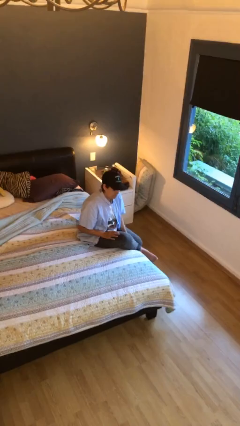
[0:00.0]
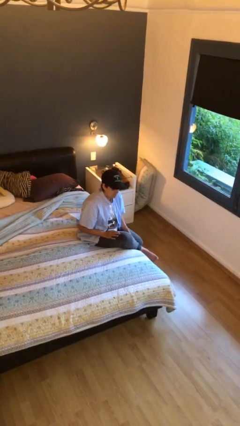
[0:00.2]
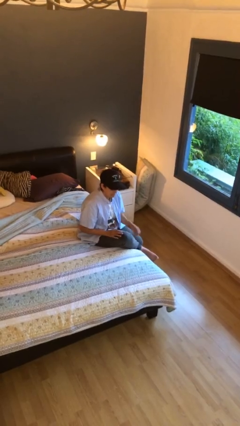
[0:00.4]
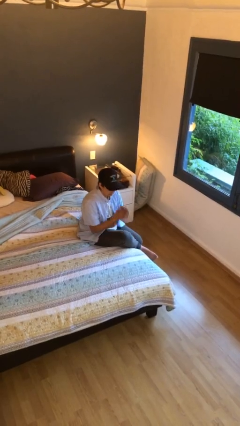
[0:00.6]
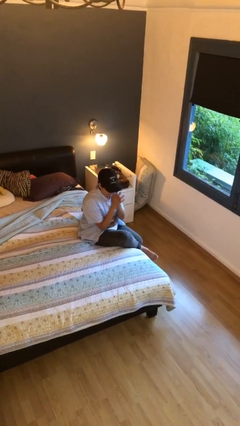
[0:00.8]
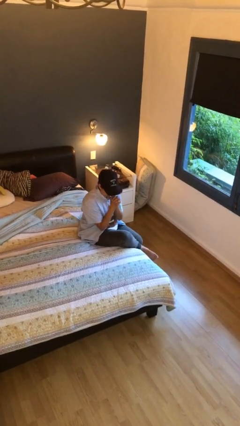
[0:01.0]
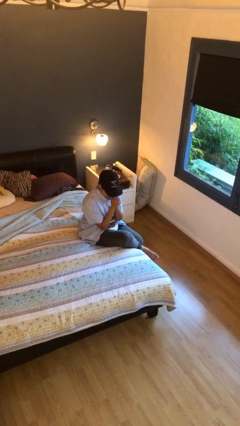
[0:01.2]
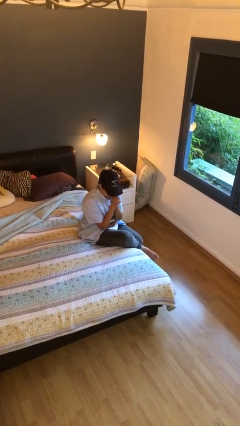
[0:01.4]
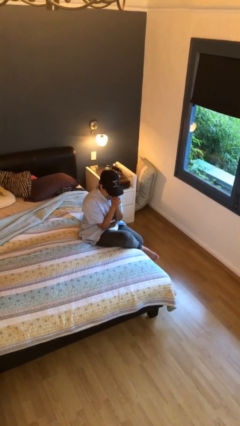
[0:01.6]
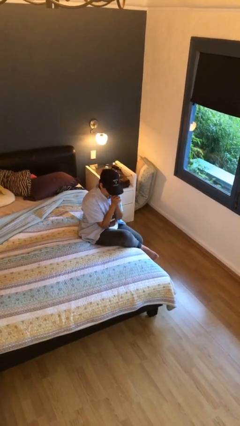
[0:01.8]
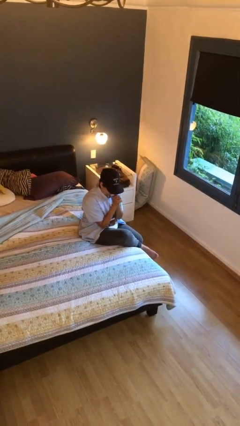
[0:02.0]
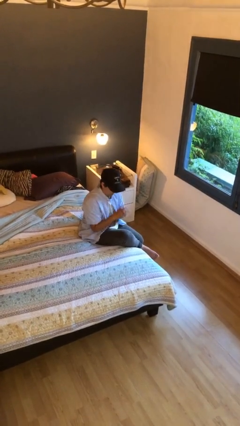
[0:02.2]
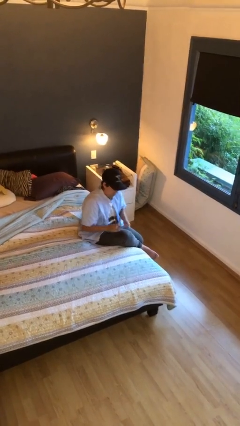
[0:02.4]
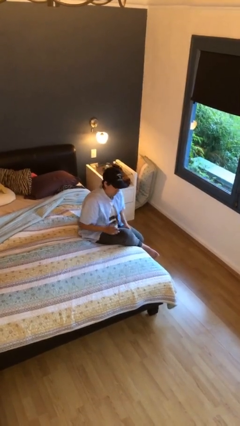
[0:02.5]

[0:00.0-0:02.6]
person prays

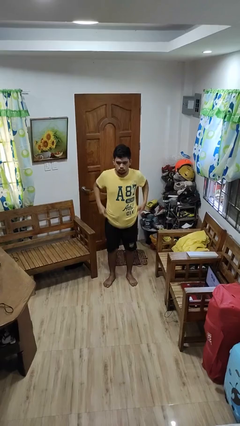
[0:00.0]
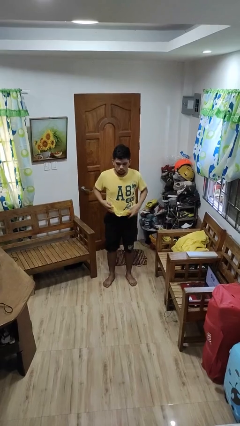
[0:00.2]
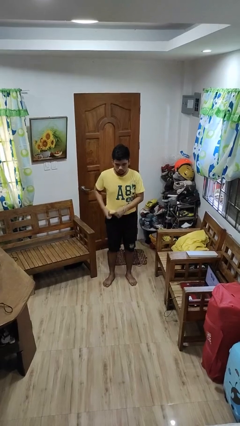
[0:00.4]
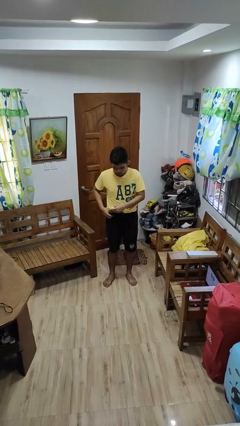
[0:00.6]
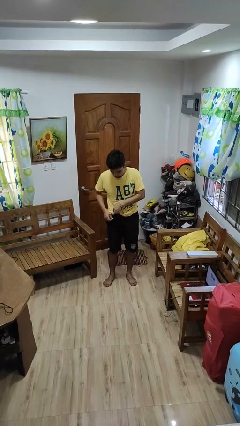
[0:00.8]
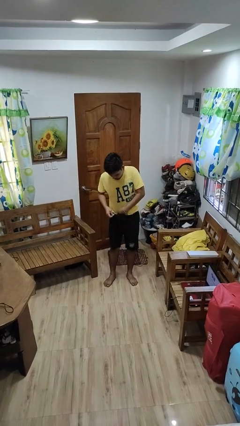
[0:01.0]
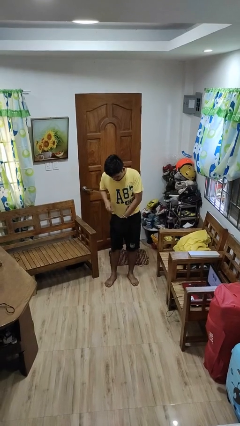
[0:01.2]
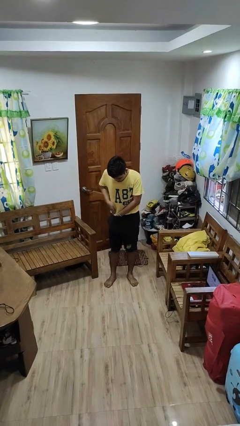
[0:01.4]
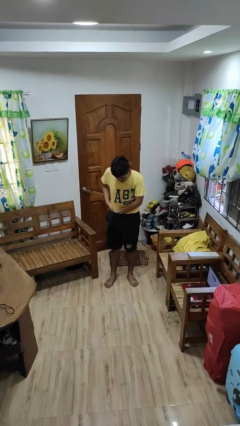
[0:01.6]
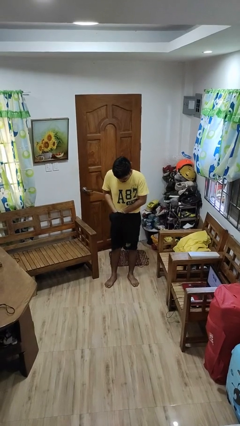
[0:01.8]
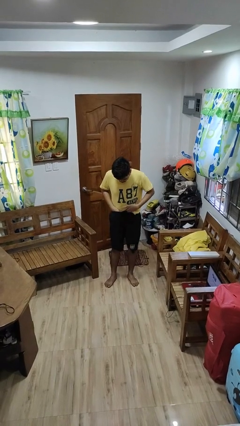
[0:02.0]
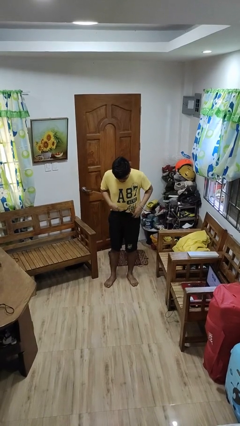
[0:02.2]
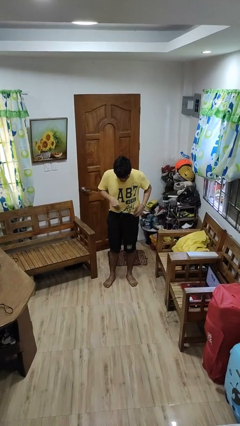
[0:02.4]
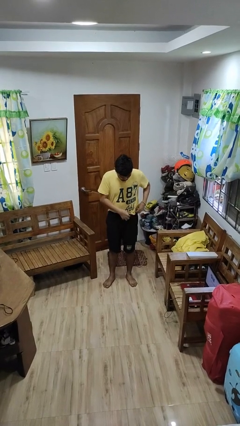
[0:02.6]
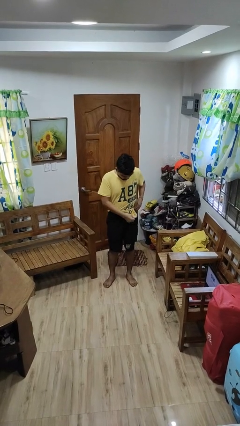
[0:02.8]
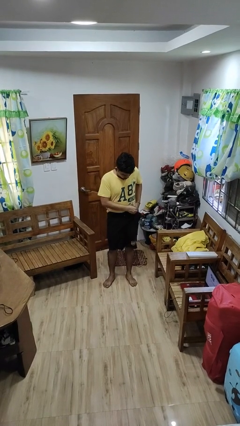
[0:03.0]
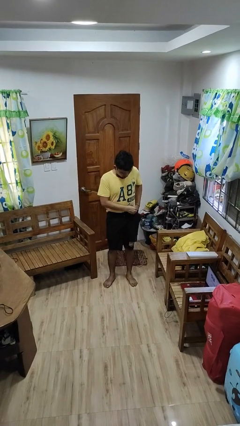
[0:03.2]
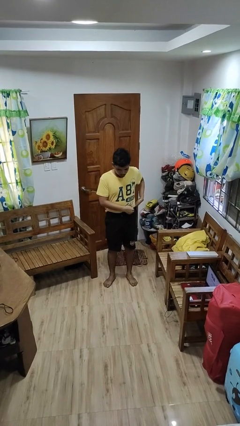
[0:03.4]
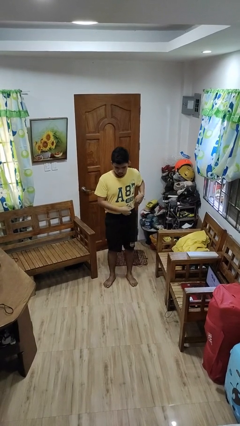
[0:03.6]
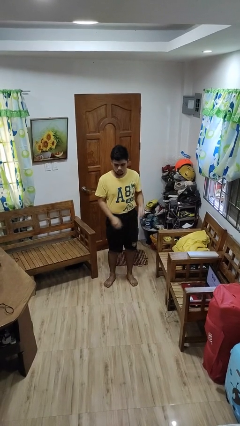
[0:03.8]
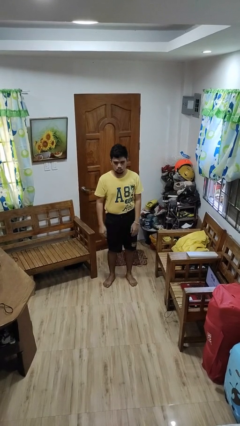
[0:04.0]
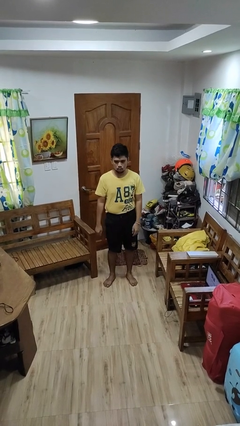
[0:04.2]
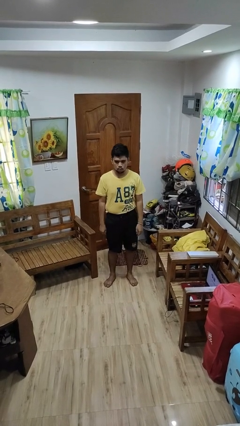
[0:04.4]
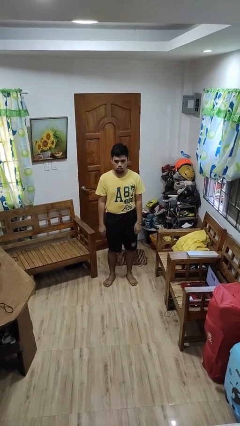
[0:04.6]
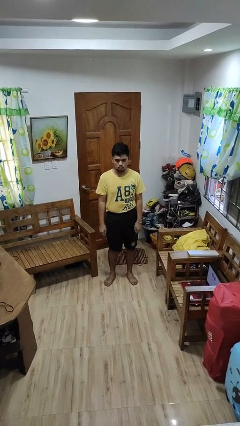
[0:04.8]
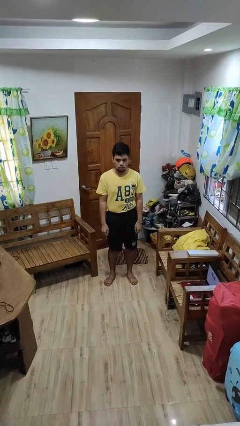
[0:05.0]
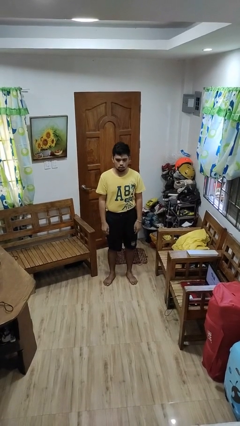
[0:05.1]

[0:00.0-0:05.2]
person tucks in shirt

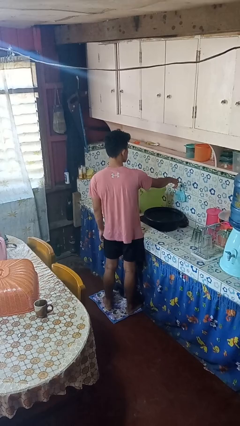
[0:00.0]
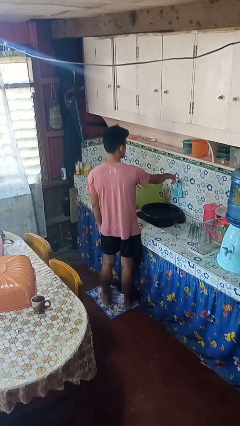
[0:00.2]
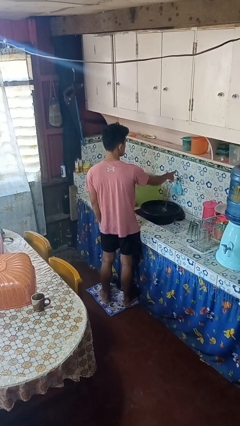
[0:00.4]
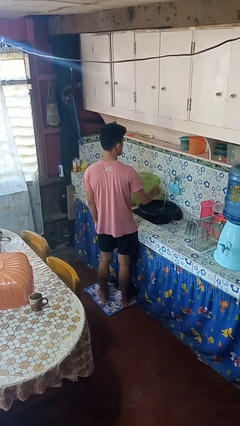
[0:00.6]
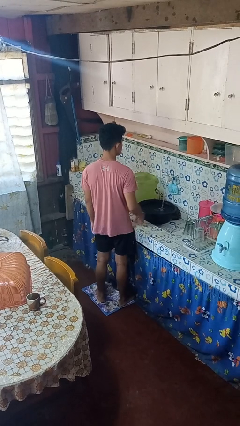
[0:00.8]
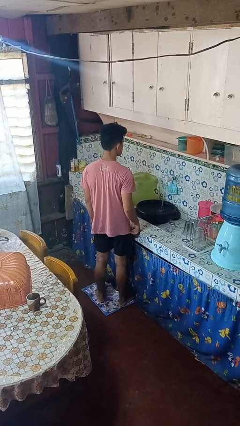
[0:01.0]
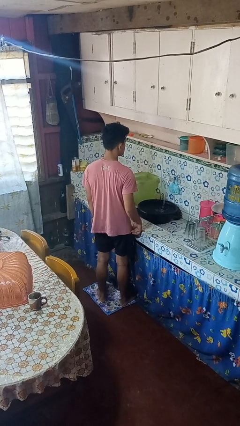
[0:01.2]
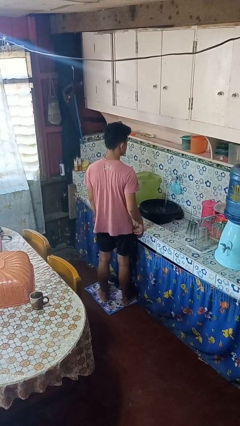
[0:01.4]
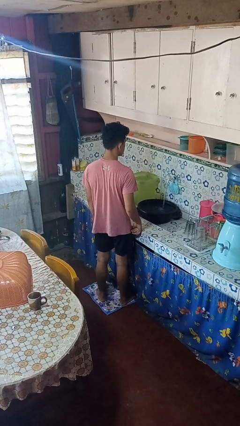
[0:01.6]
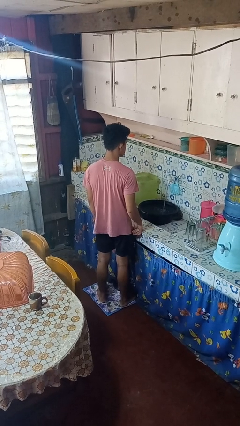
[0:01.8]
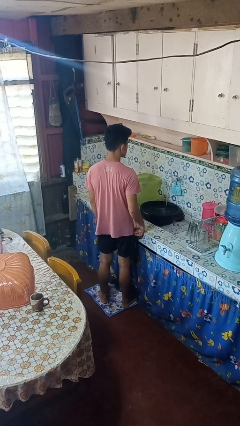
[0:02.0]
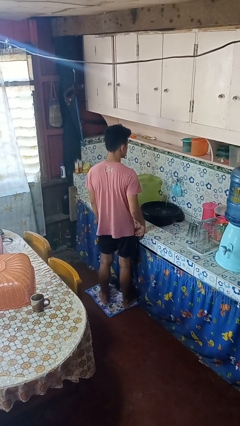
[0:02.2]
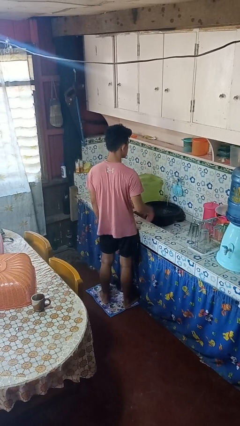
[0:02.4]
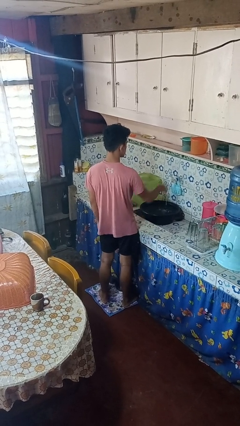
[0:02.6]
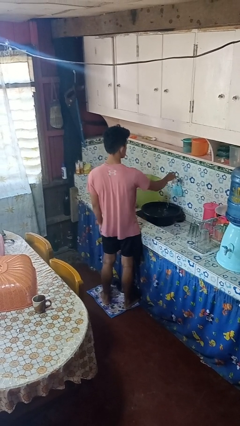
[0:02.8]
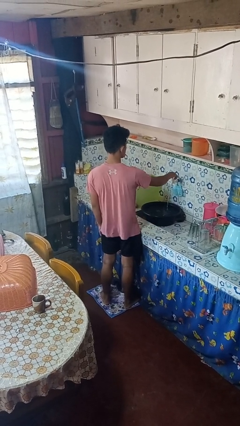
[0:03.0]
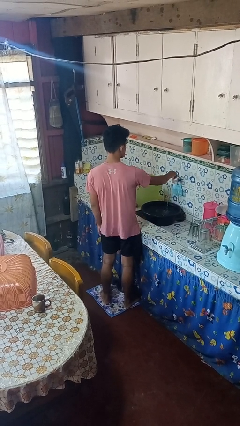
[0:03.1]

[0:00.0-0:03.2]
person turns on faucet

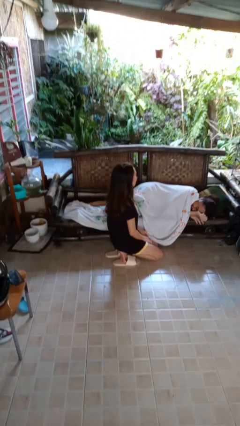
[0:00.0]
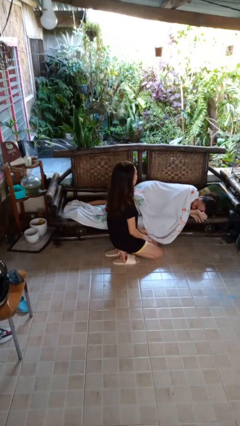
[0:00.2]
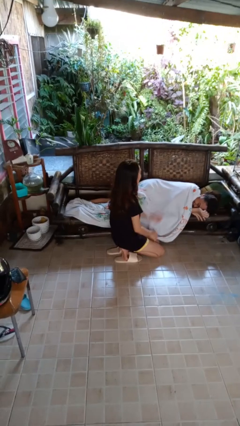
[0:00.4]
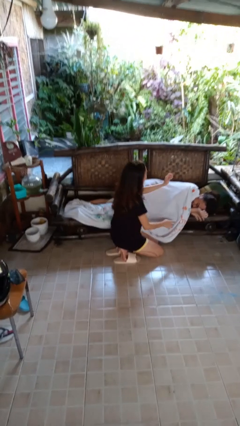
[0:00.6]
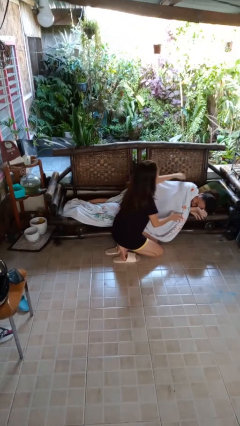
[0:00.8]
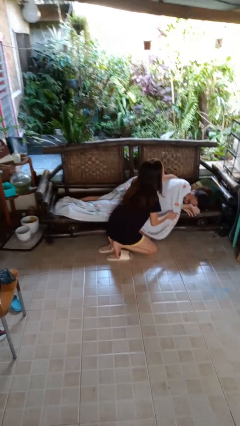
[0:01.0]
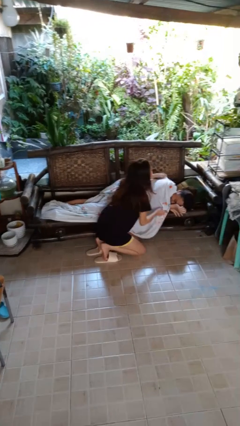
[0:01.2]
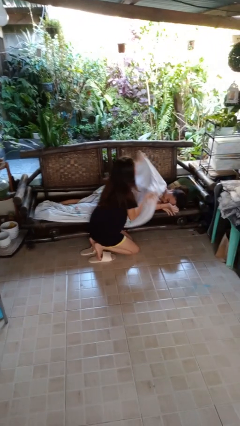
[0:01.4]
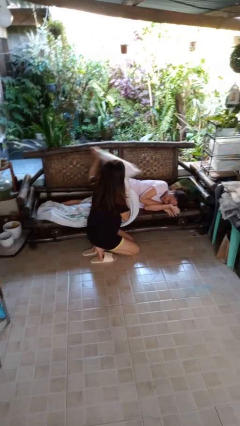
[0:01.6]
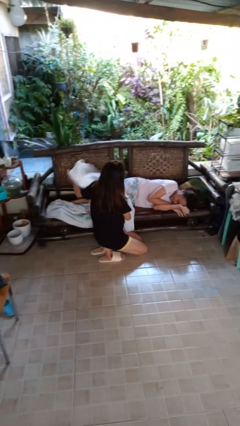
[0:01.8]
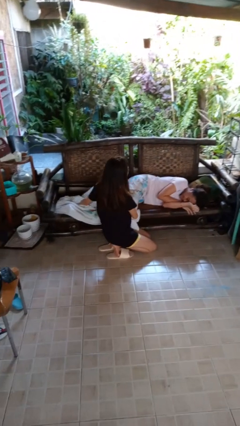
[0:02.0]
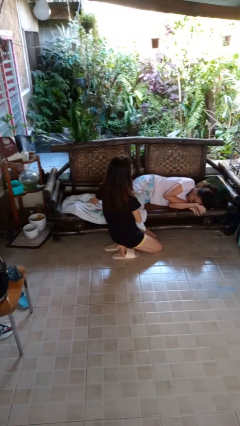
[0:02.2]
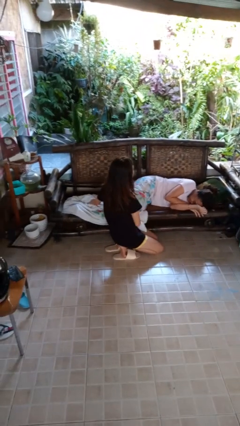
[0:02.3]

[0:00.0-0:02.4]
person uncovers friend with blanket

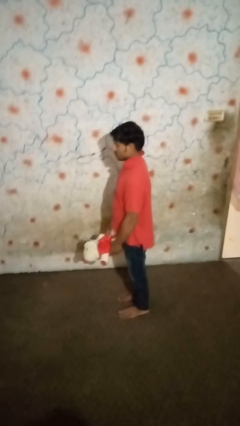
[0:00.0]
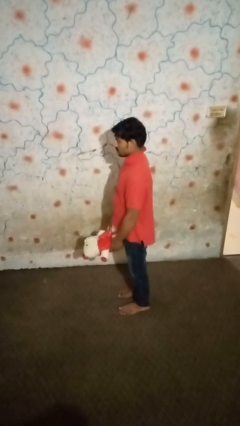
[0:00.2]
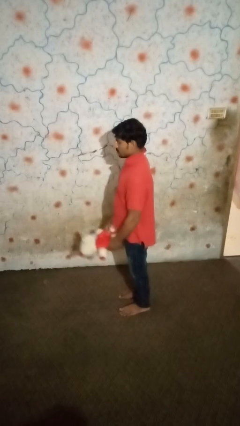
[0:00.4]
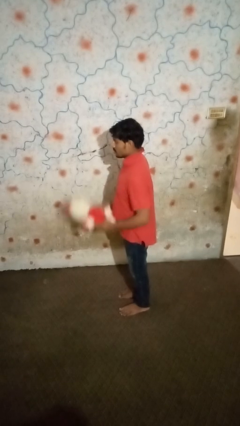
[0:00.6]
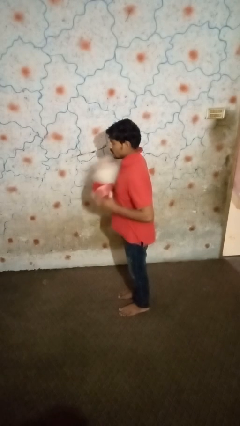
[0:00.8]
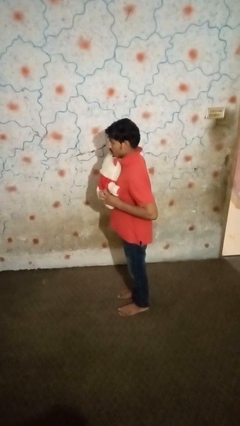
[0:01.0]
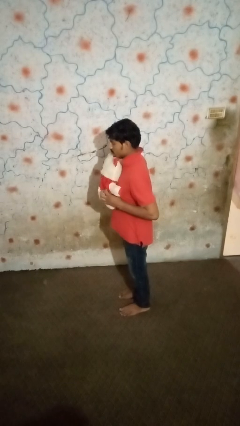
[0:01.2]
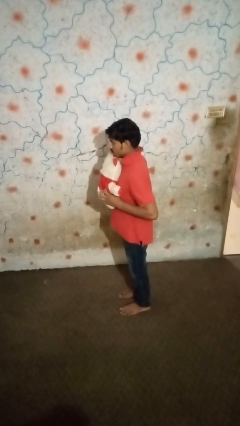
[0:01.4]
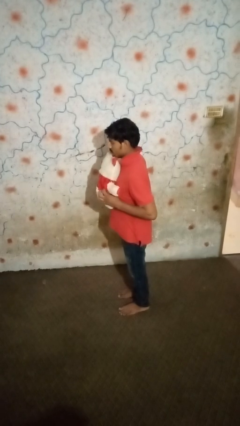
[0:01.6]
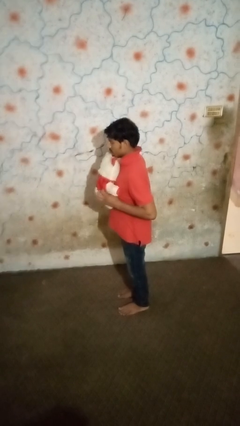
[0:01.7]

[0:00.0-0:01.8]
person hugs stuffed animal

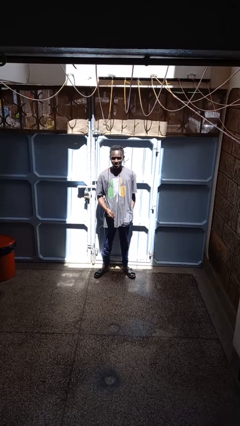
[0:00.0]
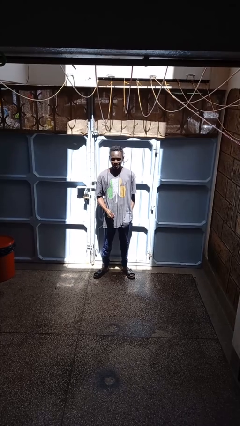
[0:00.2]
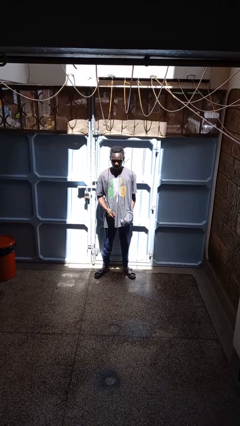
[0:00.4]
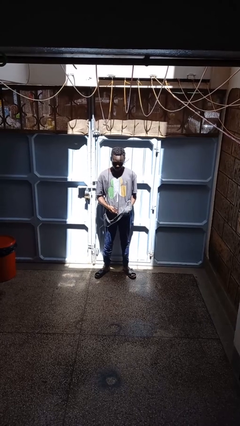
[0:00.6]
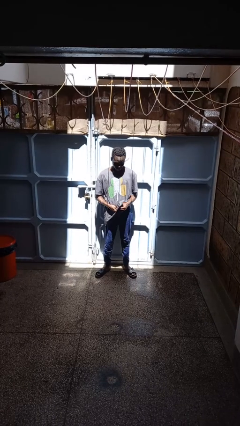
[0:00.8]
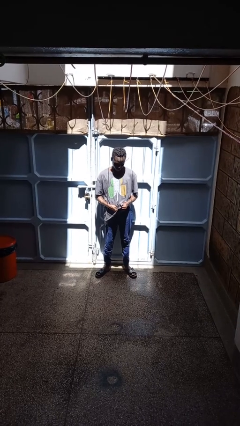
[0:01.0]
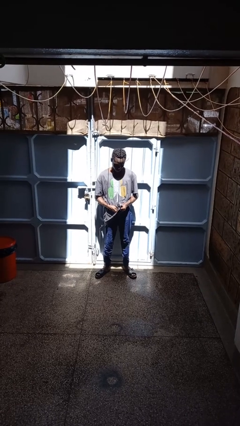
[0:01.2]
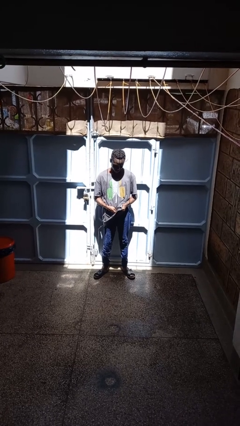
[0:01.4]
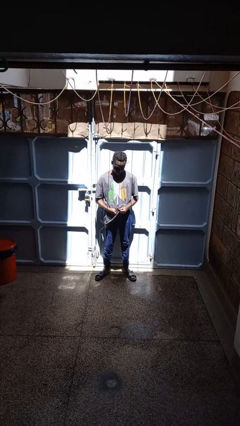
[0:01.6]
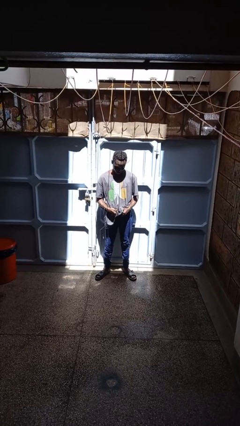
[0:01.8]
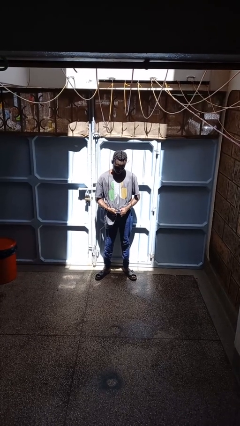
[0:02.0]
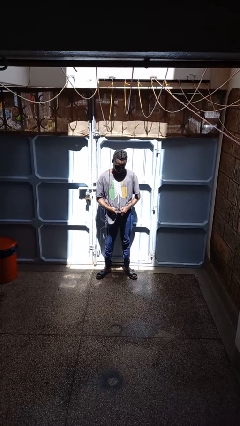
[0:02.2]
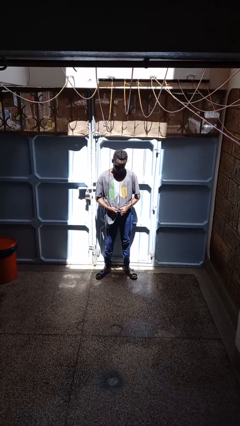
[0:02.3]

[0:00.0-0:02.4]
person cleans eyeglasses
